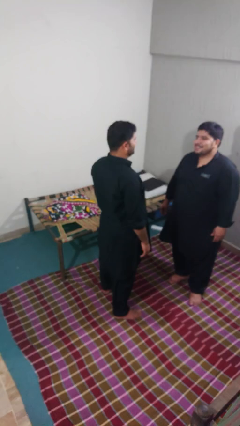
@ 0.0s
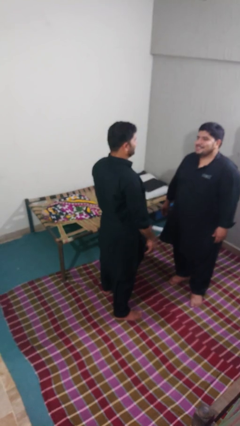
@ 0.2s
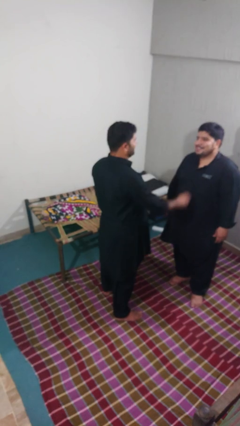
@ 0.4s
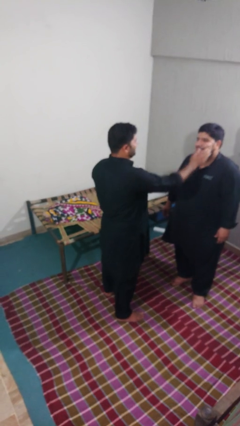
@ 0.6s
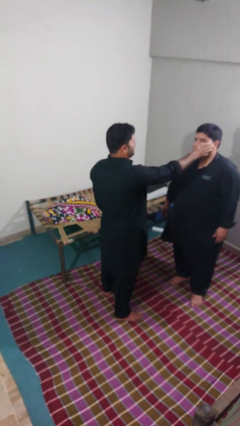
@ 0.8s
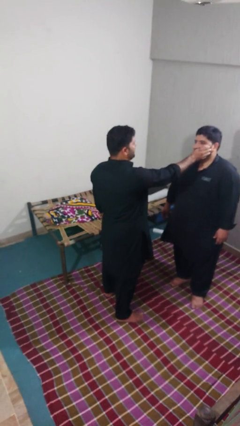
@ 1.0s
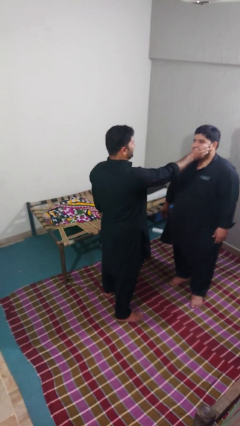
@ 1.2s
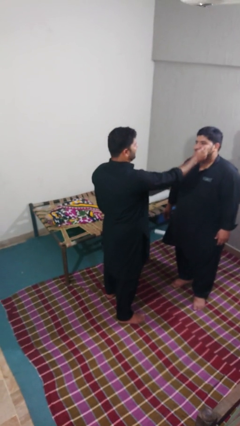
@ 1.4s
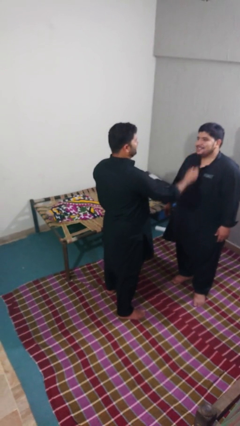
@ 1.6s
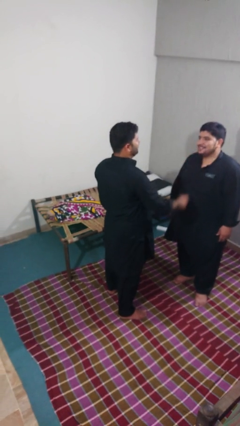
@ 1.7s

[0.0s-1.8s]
person touches face of person

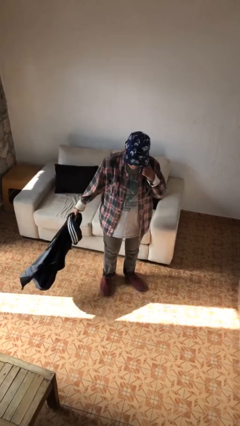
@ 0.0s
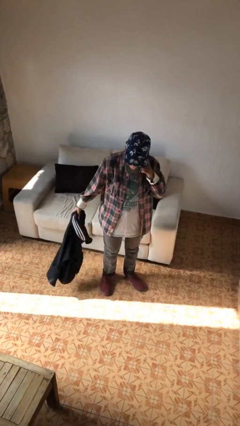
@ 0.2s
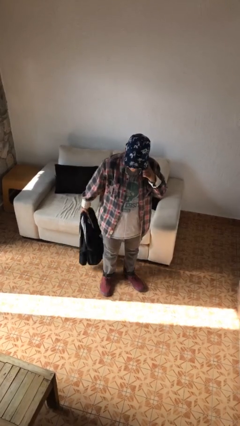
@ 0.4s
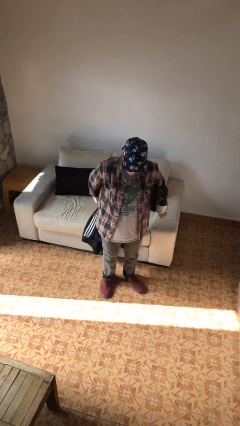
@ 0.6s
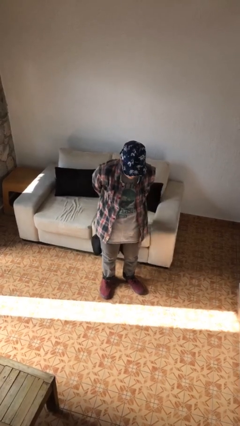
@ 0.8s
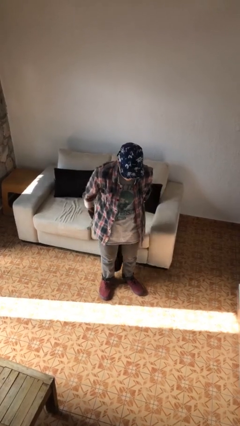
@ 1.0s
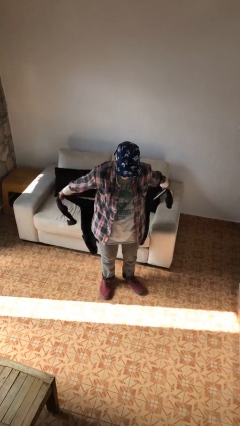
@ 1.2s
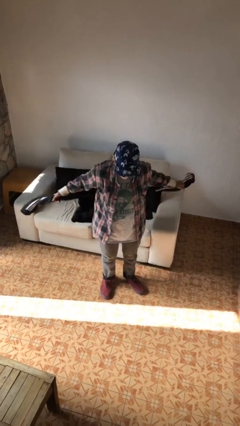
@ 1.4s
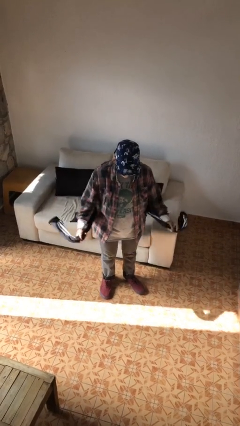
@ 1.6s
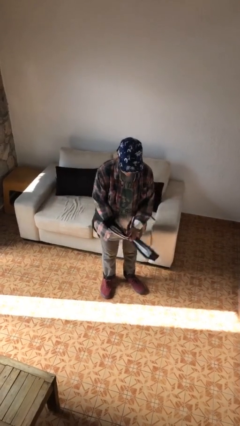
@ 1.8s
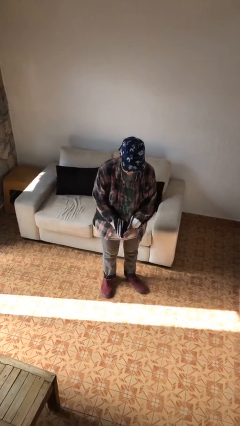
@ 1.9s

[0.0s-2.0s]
person ties jacket around waist

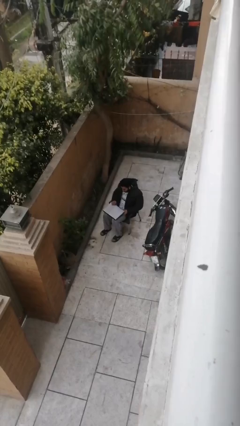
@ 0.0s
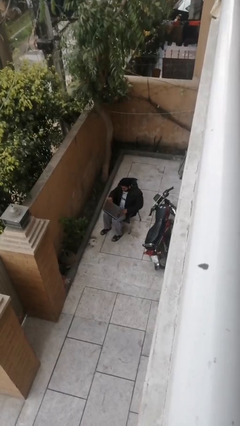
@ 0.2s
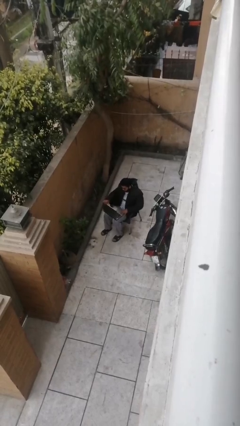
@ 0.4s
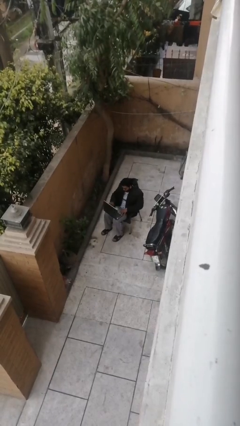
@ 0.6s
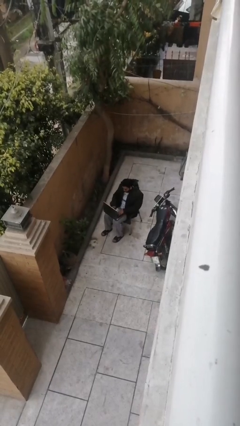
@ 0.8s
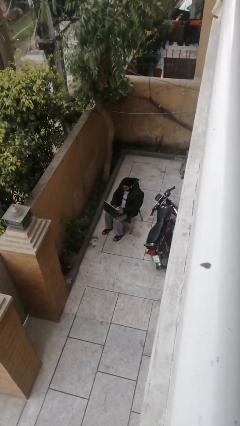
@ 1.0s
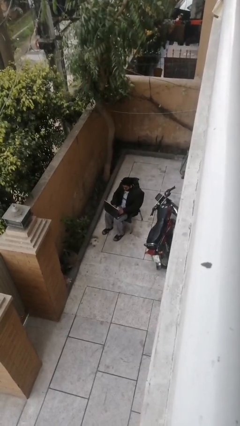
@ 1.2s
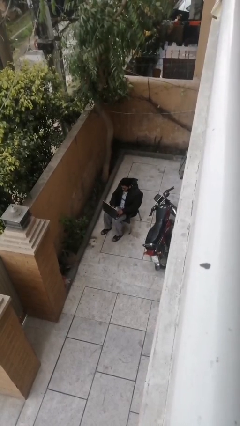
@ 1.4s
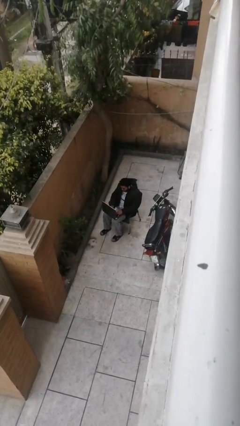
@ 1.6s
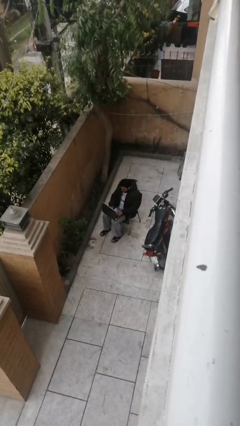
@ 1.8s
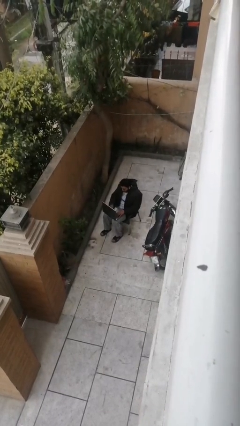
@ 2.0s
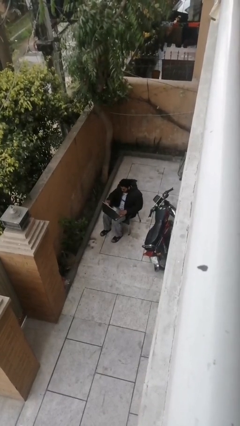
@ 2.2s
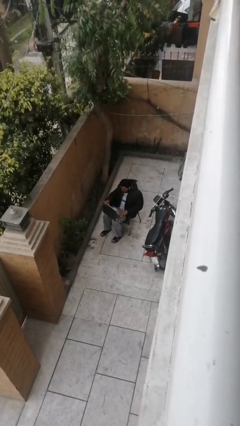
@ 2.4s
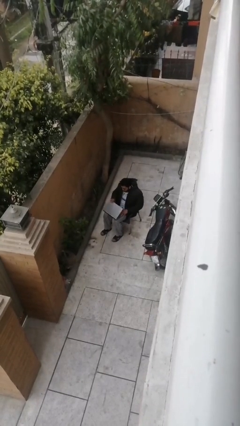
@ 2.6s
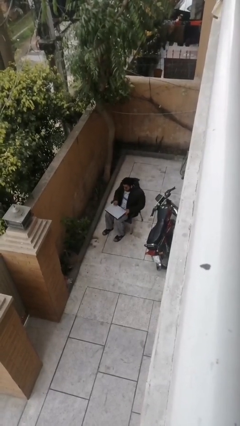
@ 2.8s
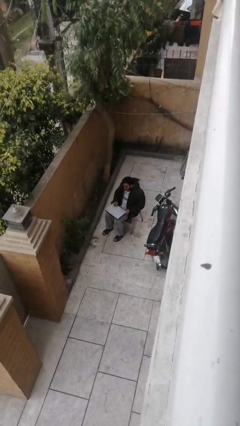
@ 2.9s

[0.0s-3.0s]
person interacts with laptop

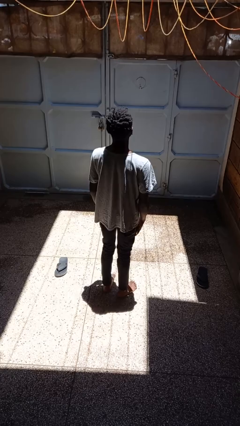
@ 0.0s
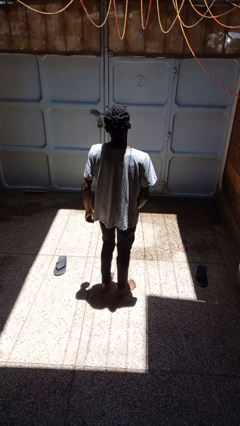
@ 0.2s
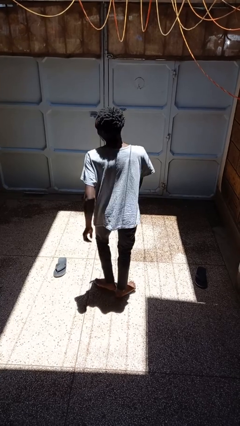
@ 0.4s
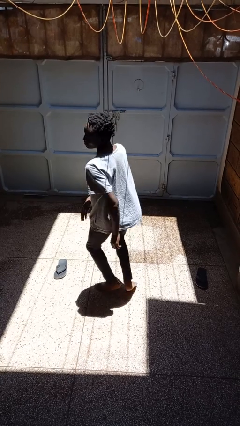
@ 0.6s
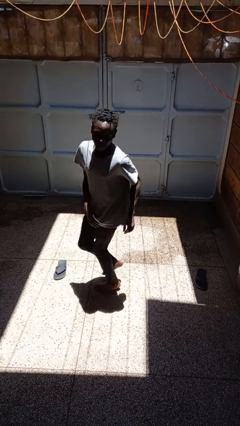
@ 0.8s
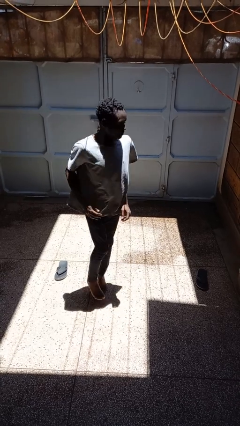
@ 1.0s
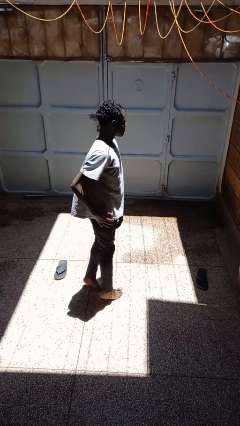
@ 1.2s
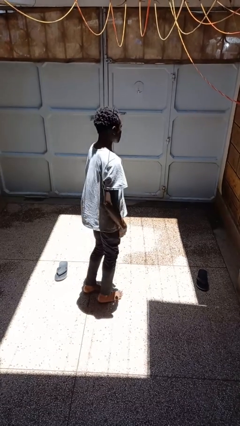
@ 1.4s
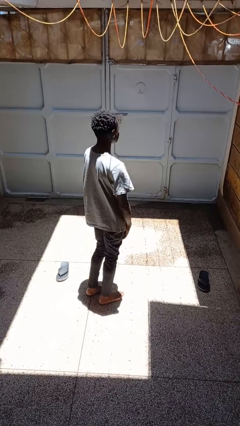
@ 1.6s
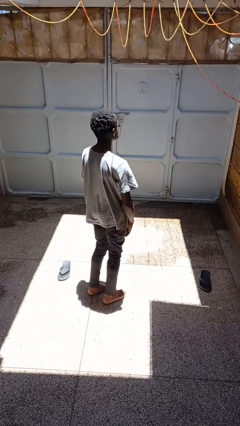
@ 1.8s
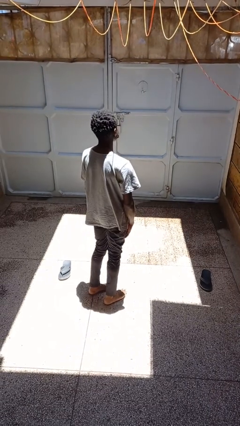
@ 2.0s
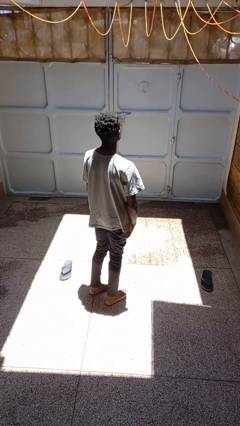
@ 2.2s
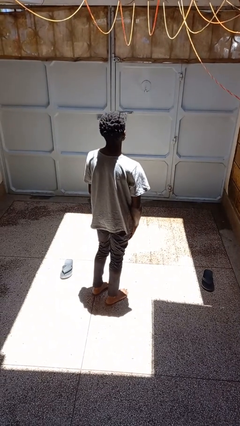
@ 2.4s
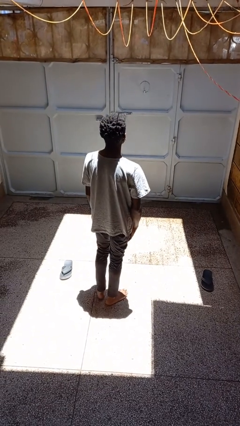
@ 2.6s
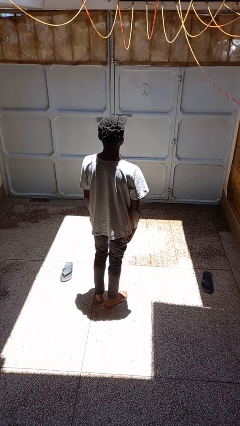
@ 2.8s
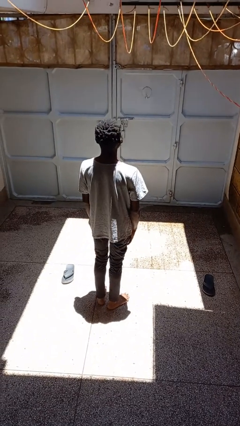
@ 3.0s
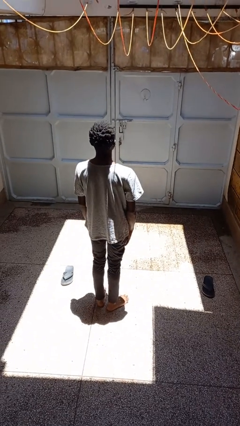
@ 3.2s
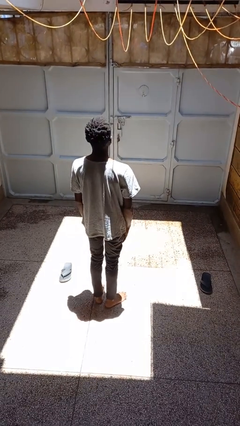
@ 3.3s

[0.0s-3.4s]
person twirls

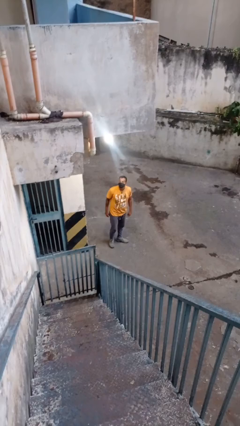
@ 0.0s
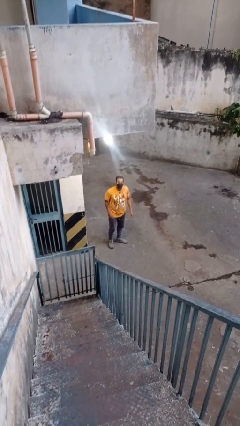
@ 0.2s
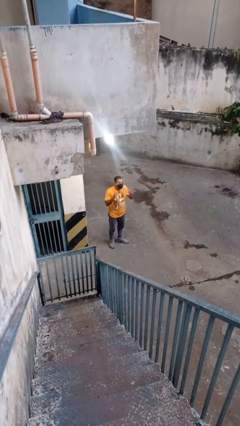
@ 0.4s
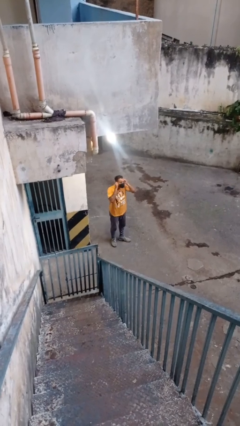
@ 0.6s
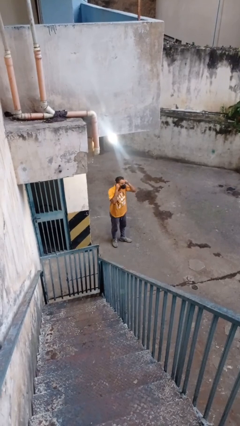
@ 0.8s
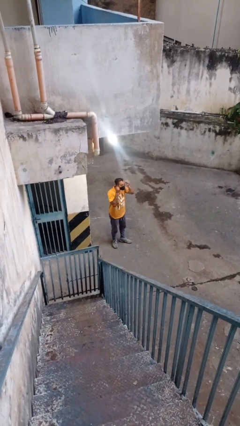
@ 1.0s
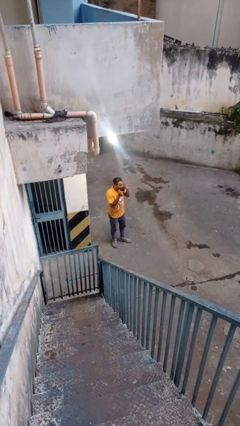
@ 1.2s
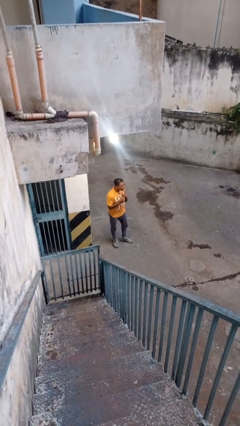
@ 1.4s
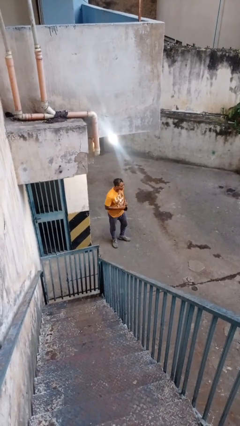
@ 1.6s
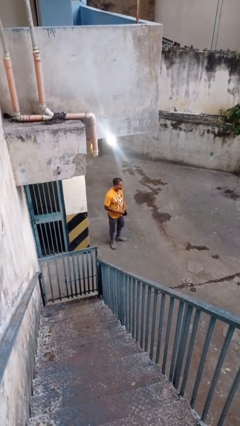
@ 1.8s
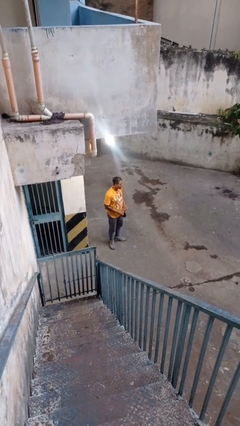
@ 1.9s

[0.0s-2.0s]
person takes off facemask

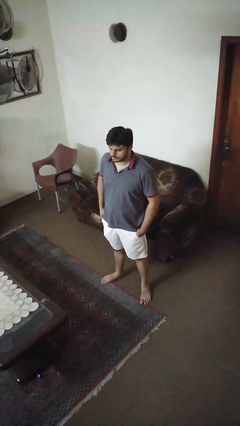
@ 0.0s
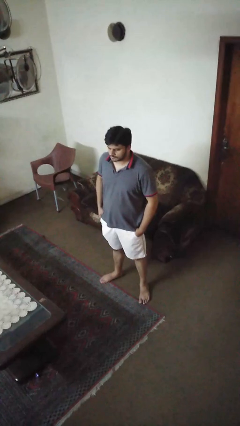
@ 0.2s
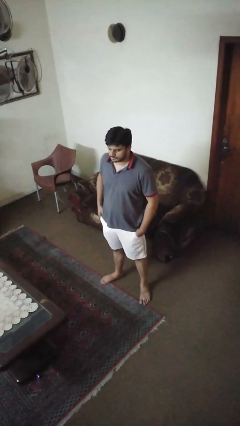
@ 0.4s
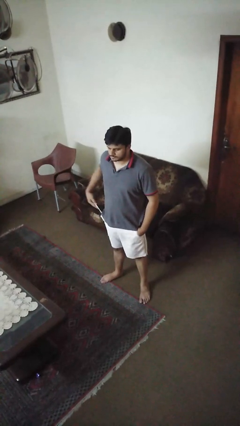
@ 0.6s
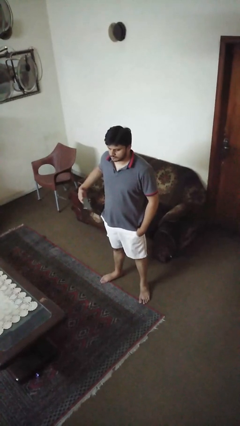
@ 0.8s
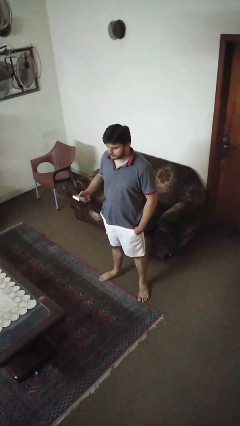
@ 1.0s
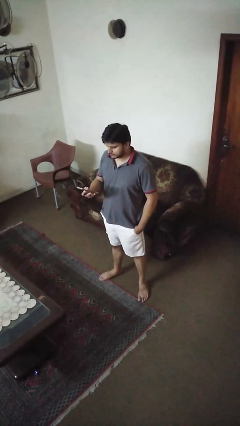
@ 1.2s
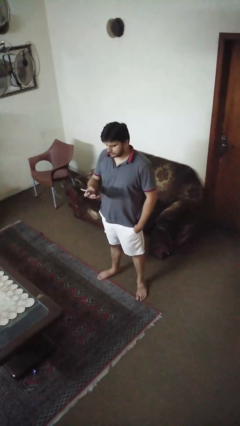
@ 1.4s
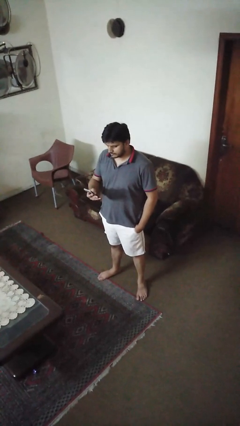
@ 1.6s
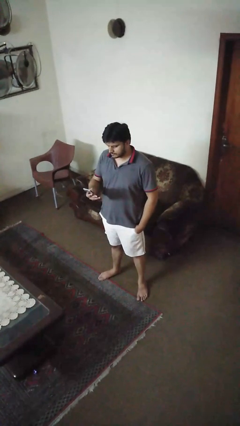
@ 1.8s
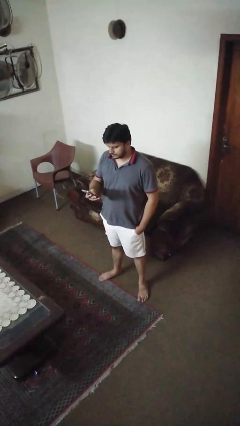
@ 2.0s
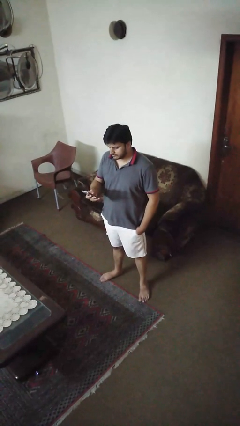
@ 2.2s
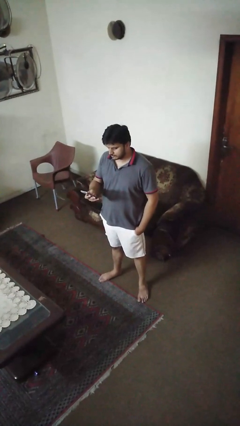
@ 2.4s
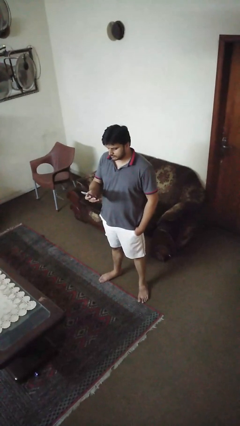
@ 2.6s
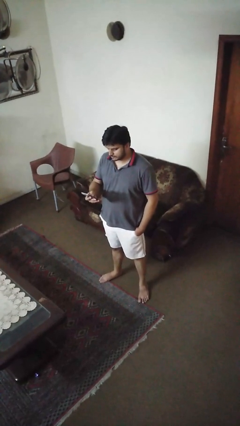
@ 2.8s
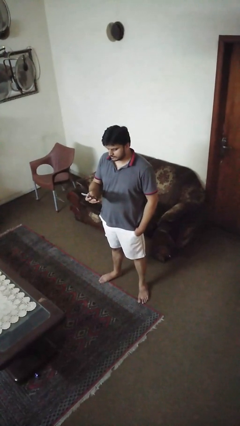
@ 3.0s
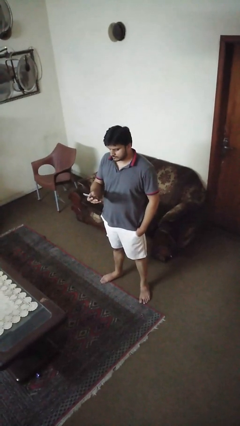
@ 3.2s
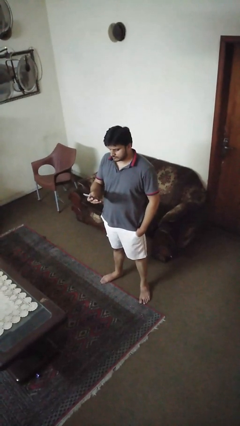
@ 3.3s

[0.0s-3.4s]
person takes phone from pocket

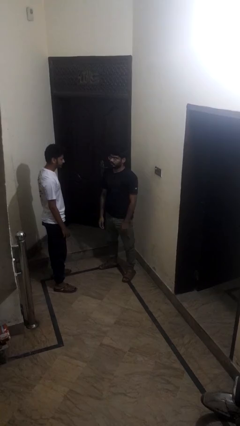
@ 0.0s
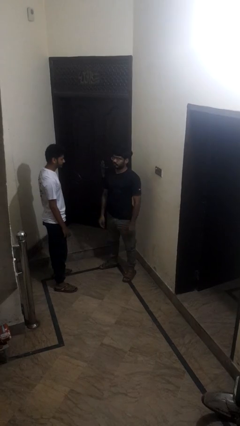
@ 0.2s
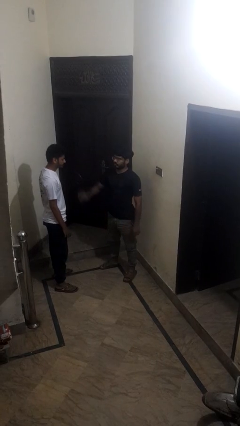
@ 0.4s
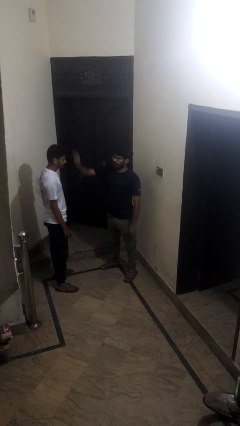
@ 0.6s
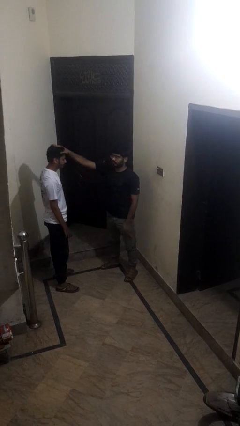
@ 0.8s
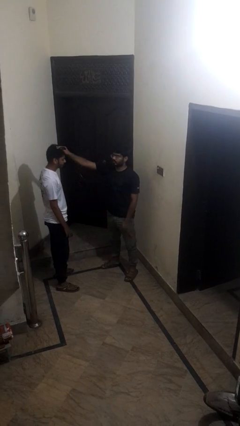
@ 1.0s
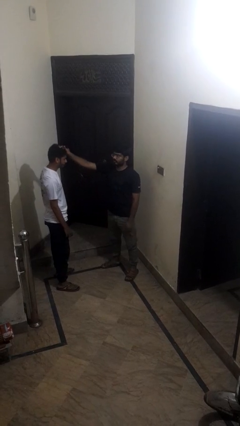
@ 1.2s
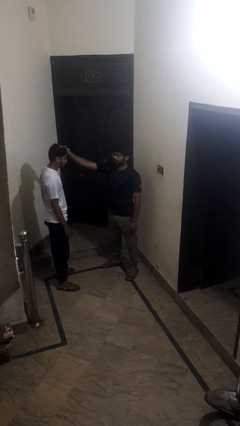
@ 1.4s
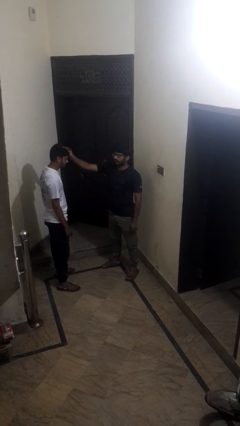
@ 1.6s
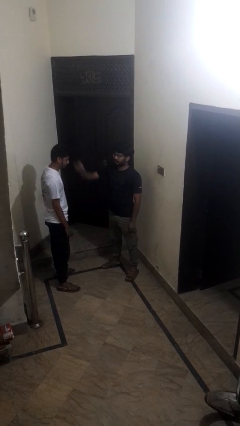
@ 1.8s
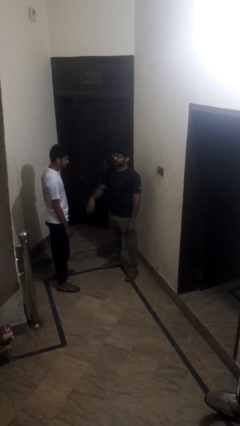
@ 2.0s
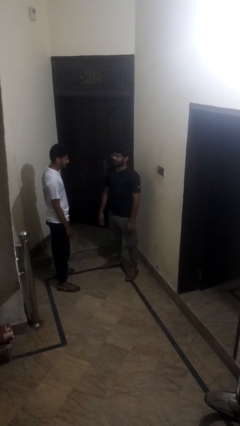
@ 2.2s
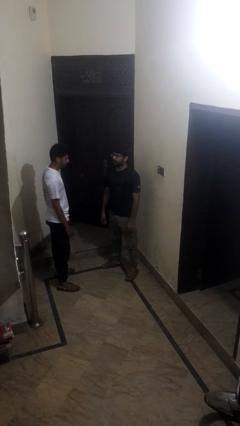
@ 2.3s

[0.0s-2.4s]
person grabs person by hair
